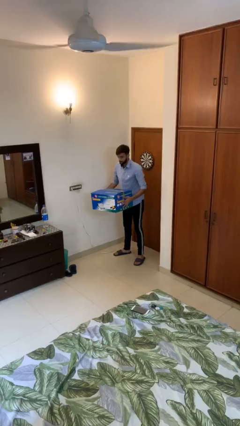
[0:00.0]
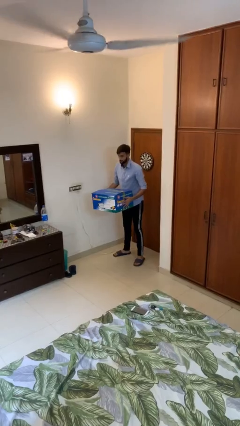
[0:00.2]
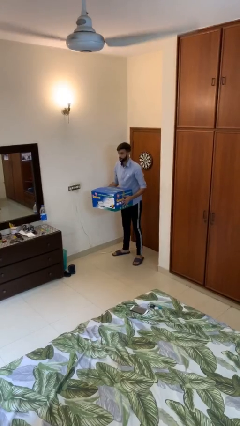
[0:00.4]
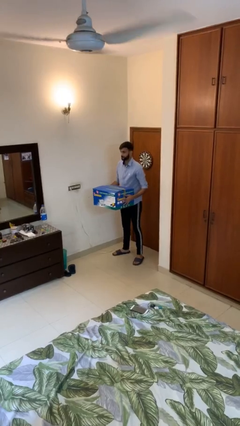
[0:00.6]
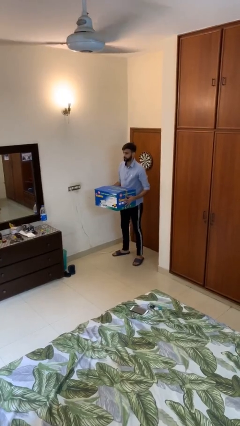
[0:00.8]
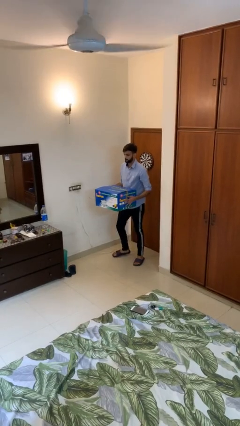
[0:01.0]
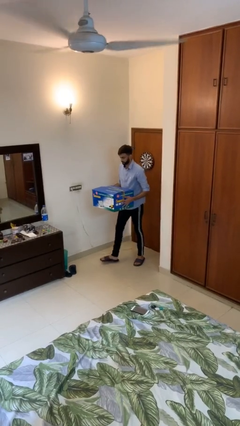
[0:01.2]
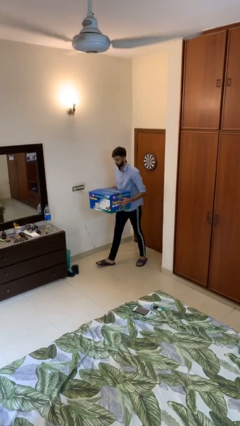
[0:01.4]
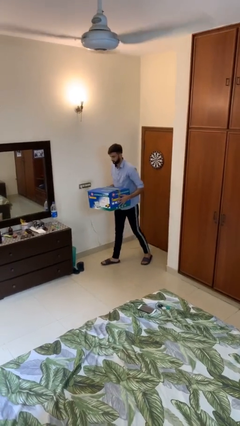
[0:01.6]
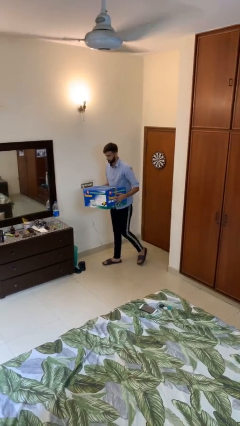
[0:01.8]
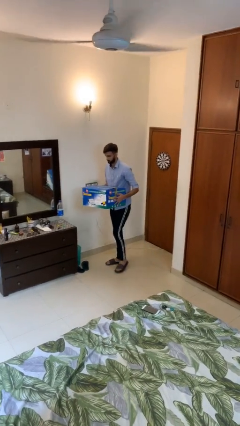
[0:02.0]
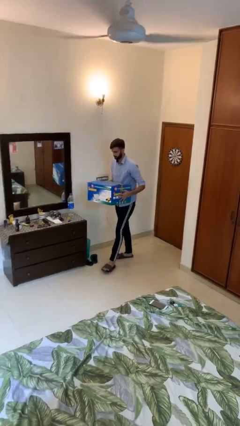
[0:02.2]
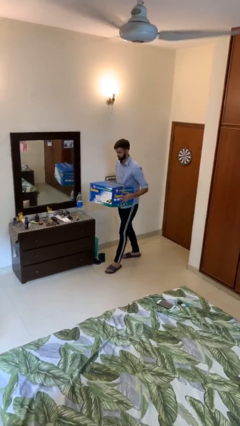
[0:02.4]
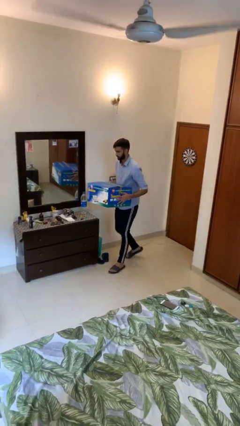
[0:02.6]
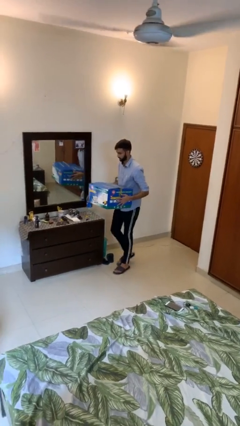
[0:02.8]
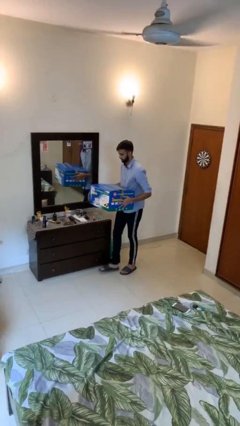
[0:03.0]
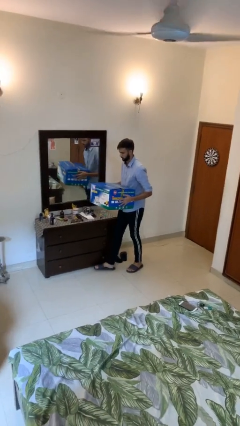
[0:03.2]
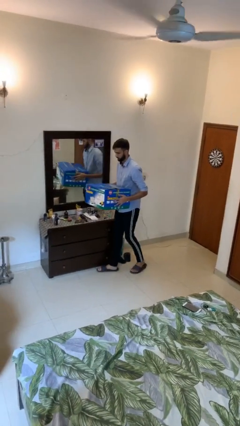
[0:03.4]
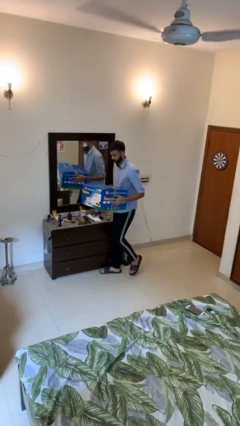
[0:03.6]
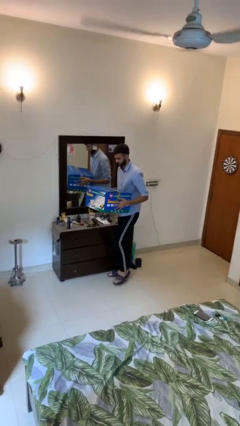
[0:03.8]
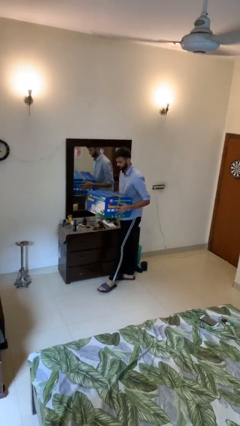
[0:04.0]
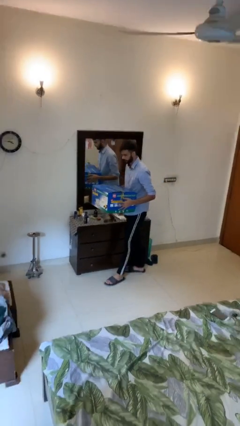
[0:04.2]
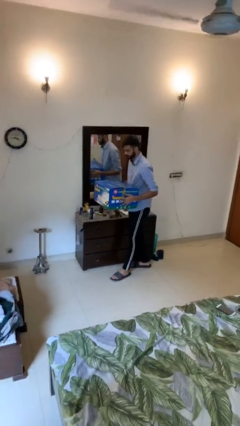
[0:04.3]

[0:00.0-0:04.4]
person carries heavy object

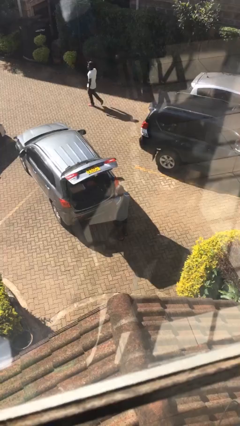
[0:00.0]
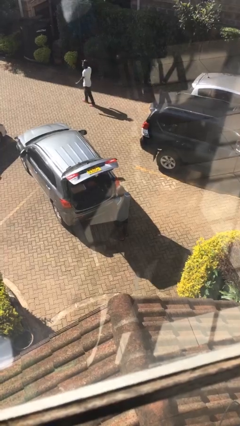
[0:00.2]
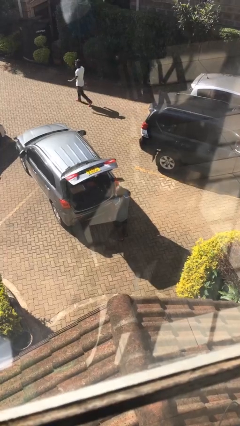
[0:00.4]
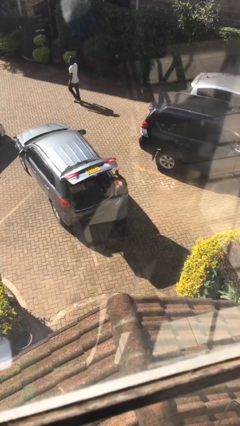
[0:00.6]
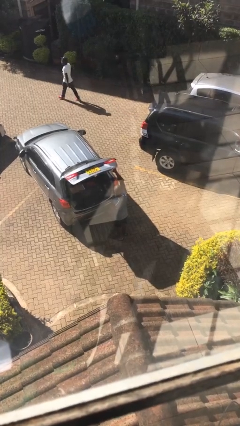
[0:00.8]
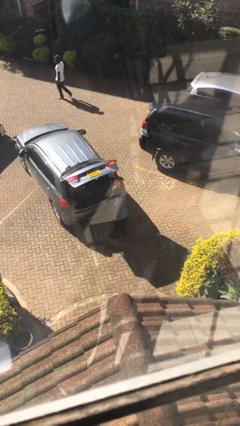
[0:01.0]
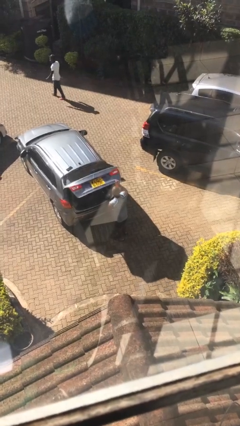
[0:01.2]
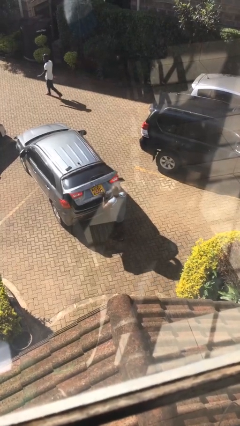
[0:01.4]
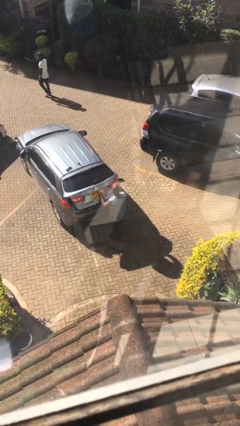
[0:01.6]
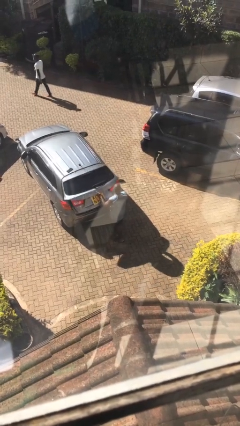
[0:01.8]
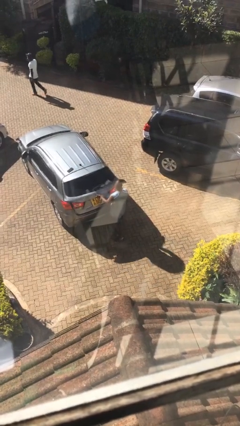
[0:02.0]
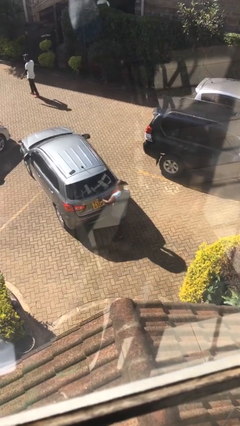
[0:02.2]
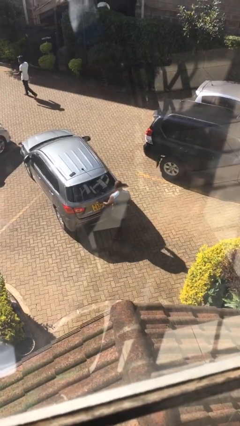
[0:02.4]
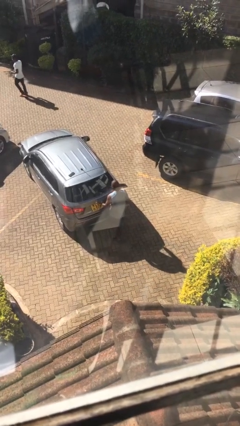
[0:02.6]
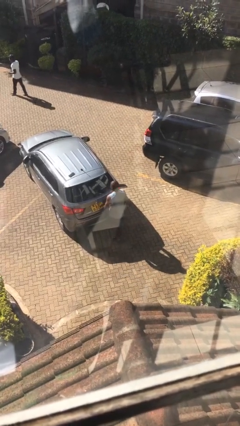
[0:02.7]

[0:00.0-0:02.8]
person closes car trunk

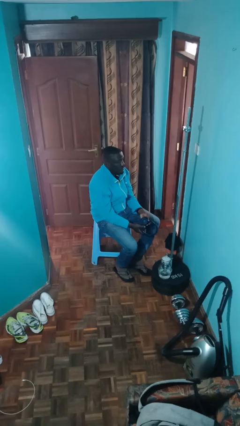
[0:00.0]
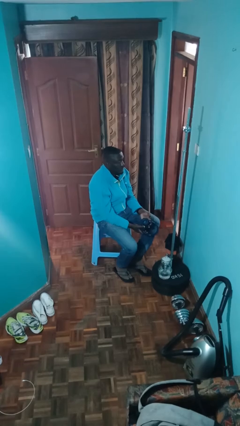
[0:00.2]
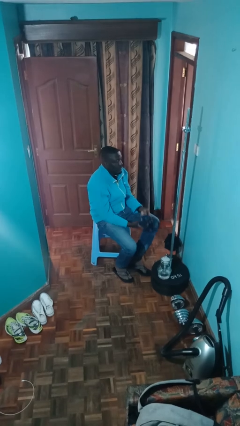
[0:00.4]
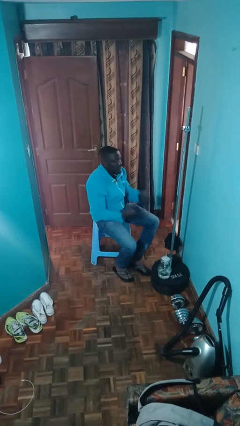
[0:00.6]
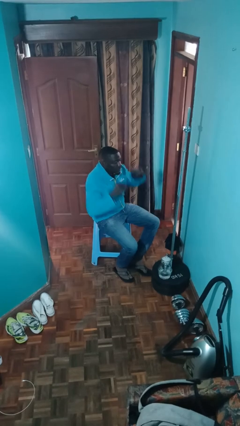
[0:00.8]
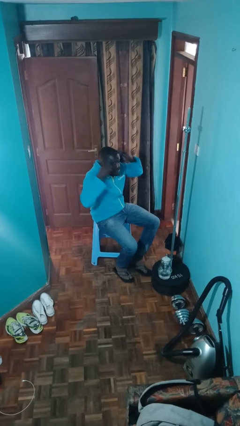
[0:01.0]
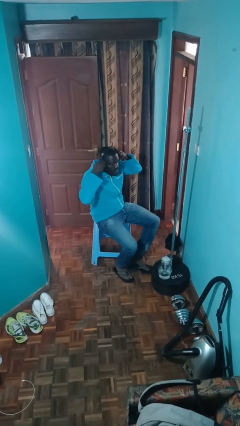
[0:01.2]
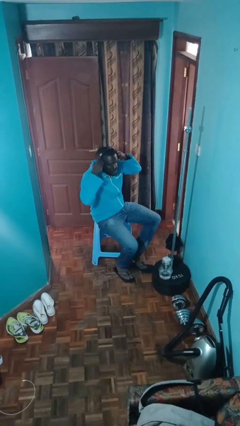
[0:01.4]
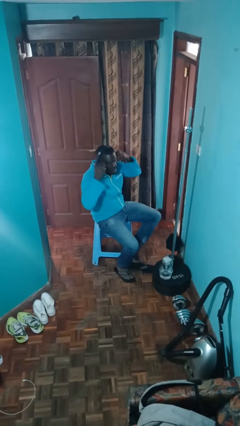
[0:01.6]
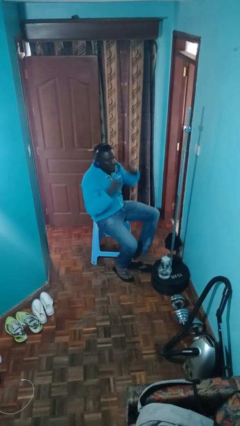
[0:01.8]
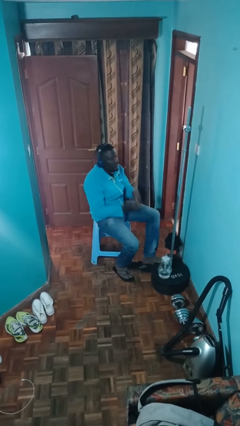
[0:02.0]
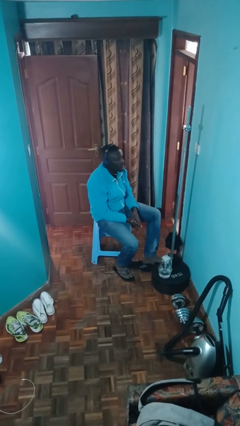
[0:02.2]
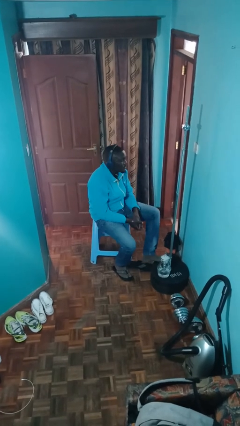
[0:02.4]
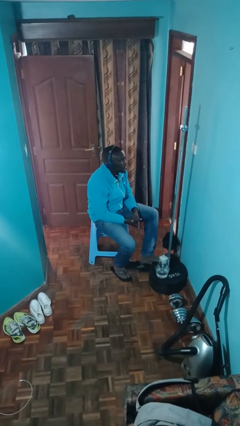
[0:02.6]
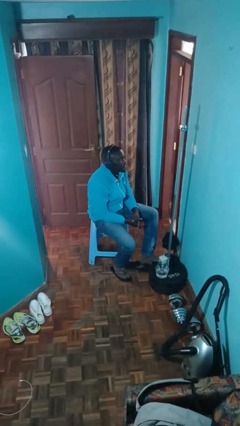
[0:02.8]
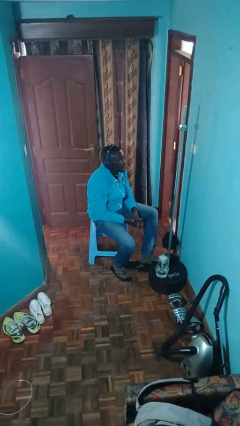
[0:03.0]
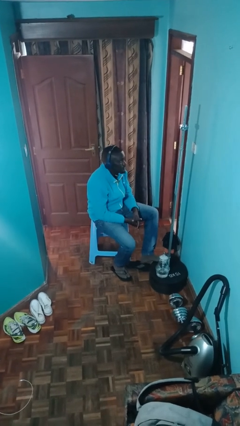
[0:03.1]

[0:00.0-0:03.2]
person puts on headphones

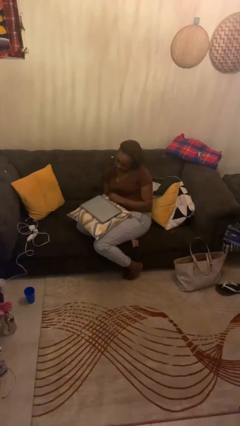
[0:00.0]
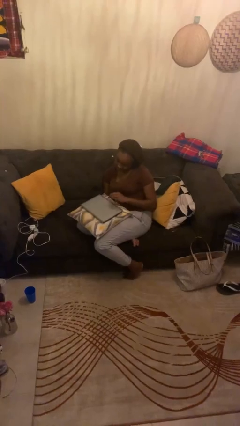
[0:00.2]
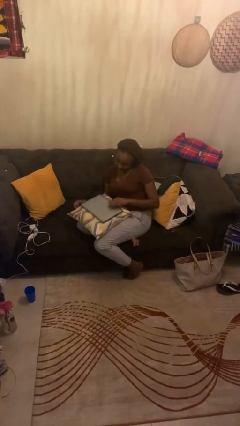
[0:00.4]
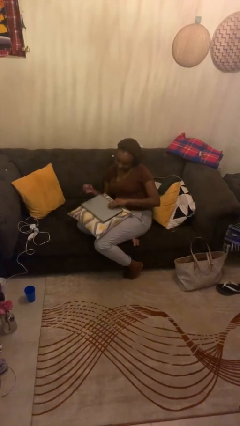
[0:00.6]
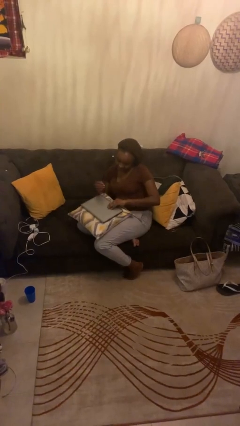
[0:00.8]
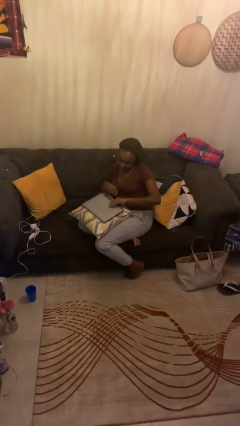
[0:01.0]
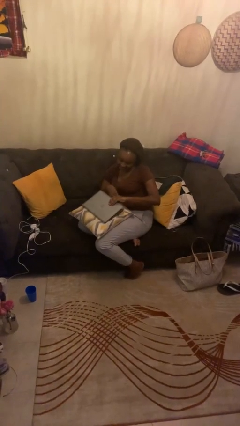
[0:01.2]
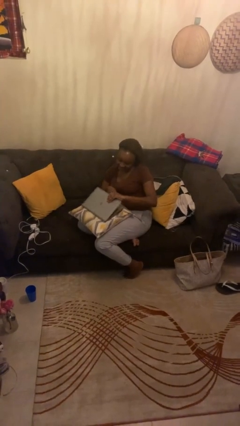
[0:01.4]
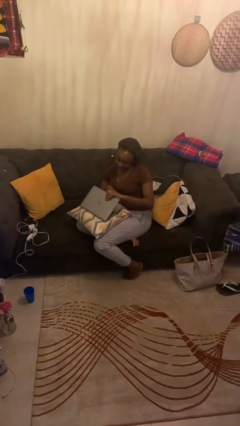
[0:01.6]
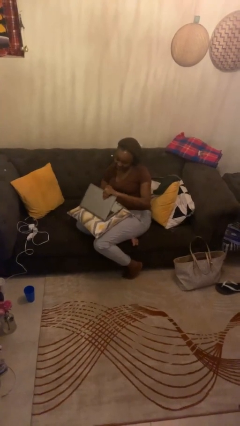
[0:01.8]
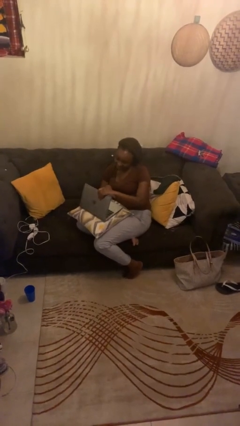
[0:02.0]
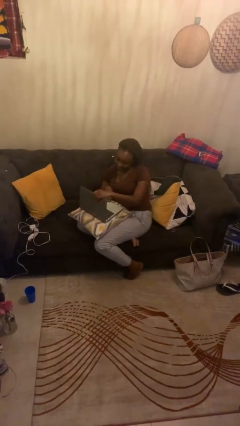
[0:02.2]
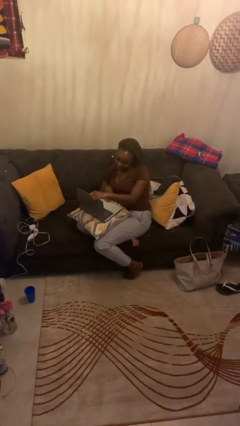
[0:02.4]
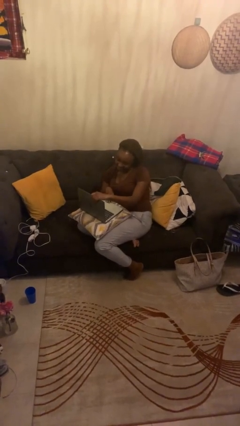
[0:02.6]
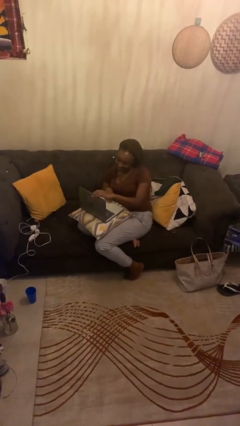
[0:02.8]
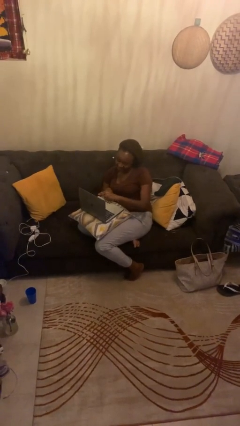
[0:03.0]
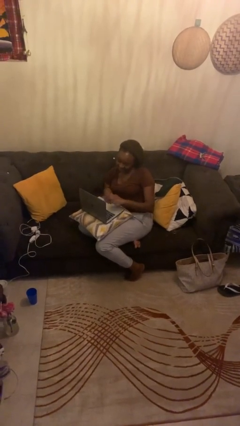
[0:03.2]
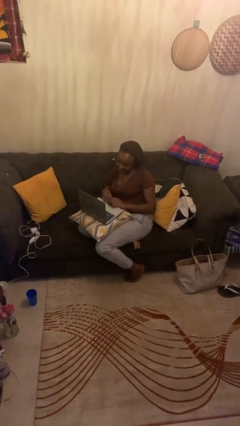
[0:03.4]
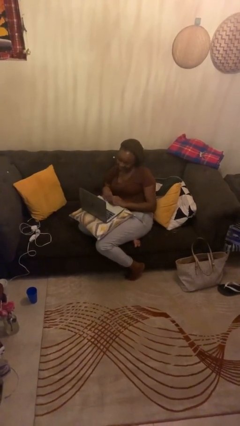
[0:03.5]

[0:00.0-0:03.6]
person opens laptop

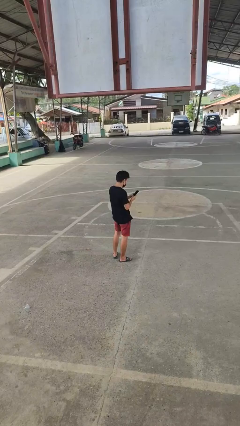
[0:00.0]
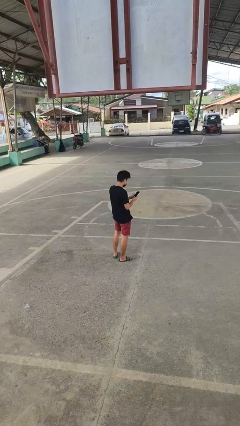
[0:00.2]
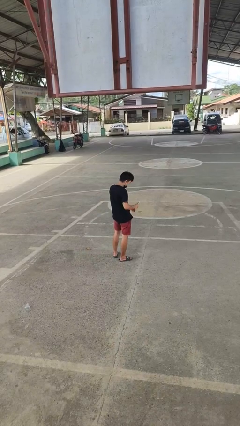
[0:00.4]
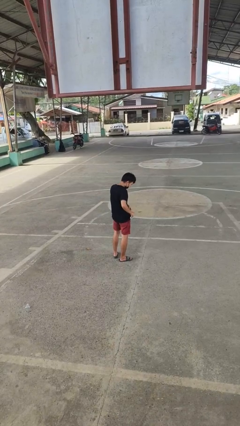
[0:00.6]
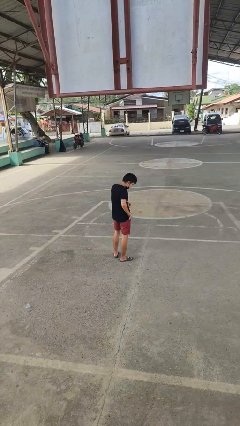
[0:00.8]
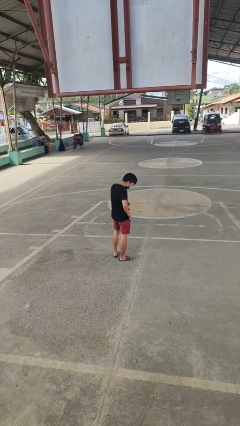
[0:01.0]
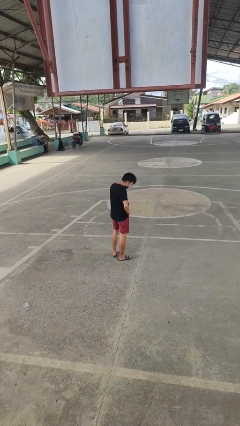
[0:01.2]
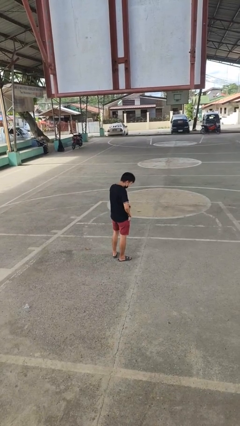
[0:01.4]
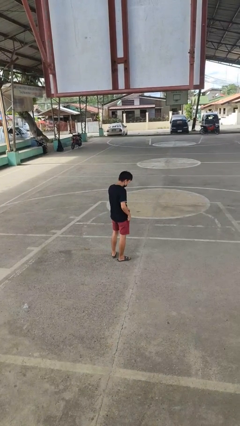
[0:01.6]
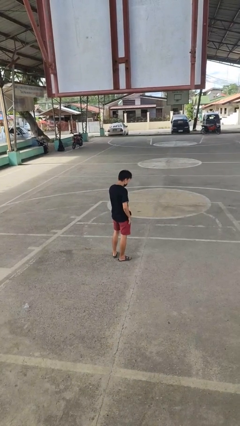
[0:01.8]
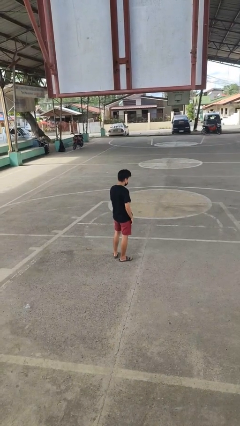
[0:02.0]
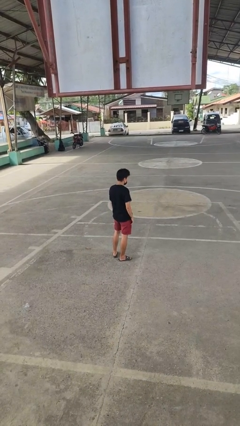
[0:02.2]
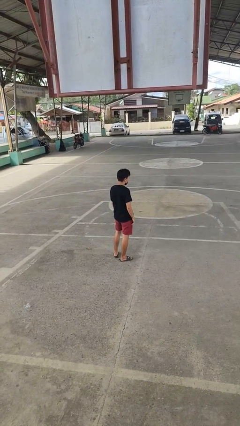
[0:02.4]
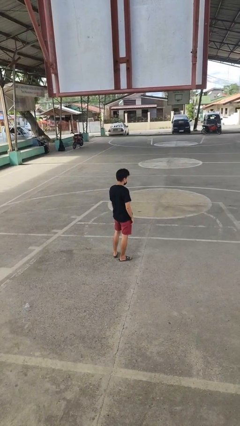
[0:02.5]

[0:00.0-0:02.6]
person puts phone into pocket

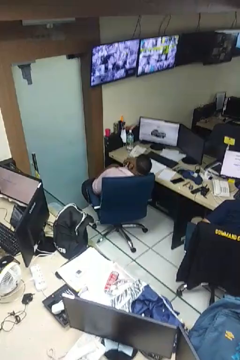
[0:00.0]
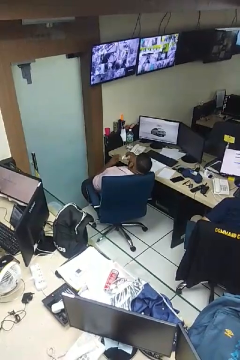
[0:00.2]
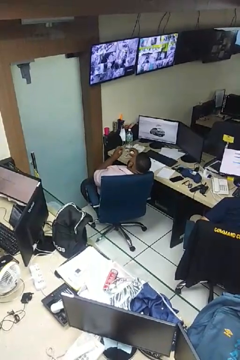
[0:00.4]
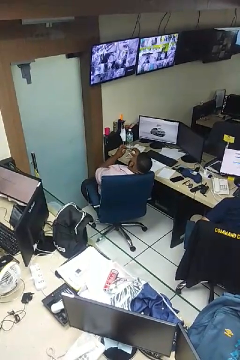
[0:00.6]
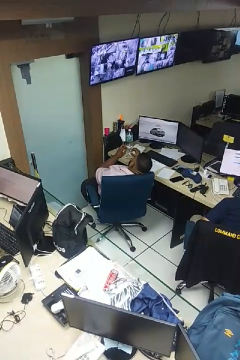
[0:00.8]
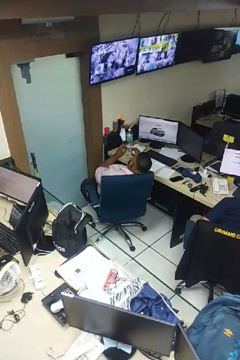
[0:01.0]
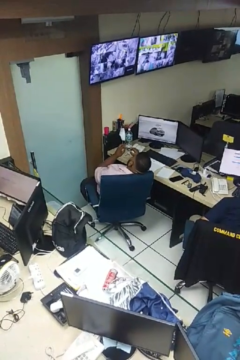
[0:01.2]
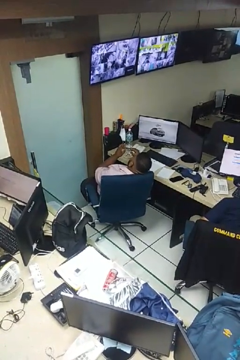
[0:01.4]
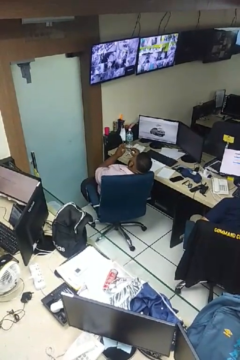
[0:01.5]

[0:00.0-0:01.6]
person clips fingernails
